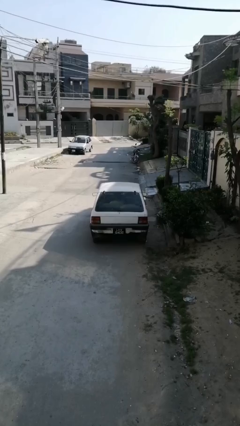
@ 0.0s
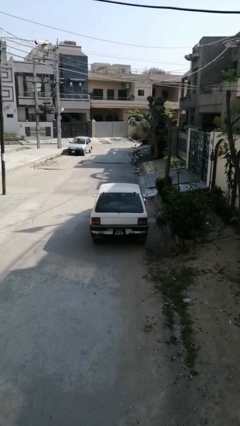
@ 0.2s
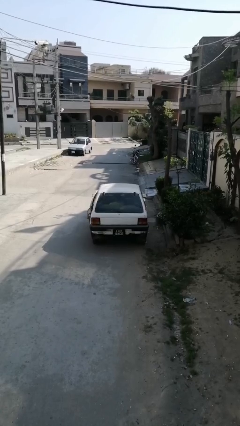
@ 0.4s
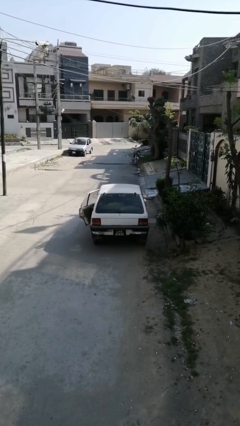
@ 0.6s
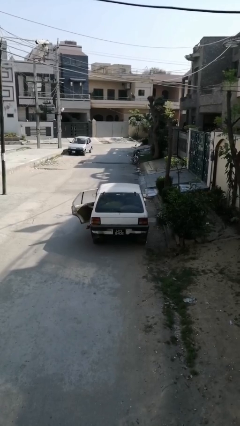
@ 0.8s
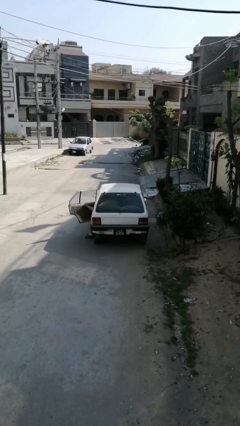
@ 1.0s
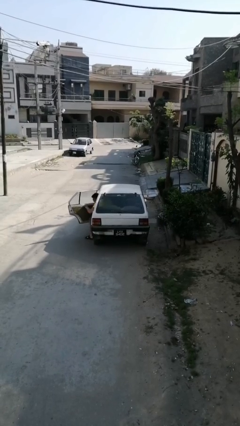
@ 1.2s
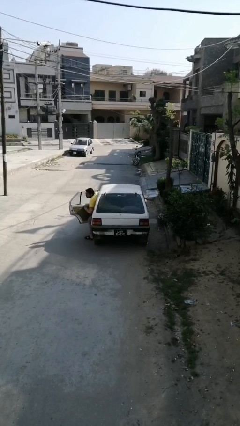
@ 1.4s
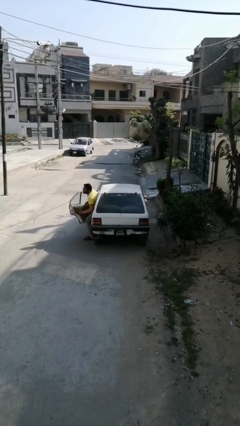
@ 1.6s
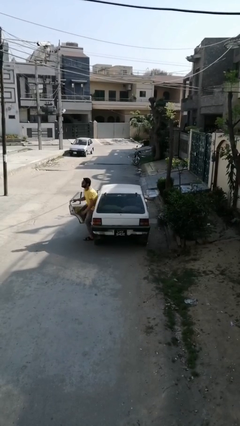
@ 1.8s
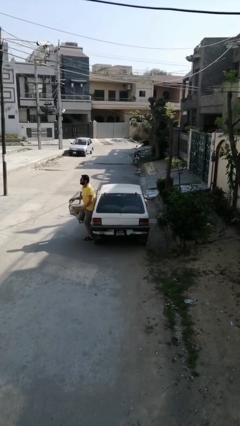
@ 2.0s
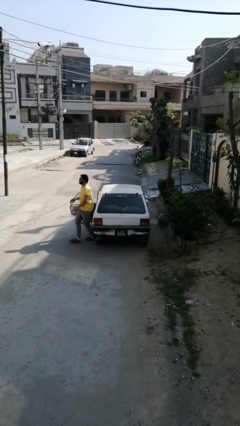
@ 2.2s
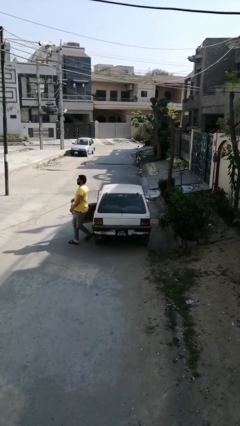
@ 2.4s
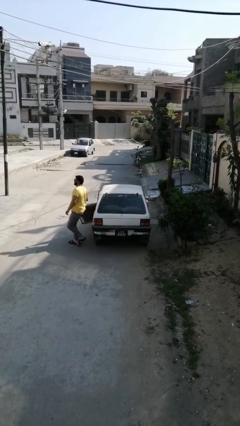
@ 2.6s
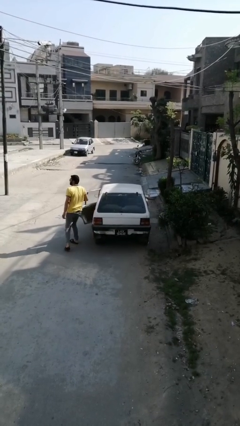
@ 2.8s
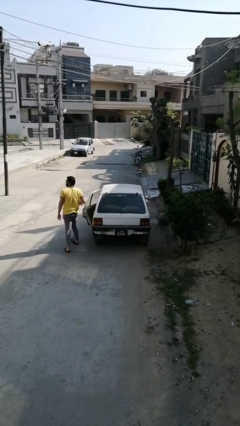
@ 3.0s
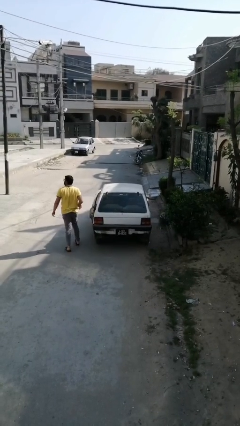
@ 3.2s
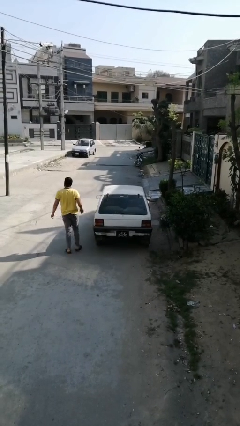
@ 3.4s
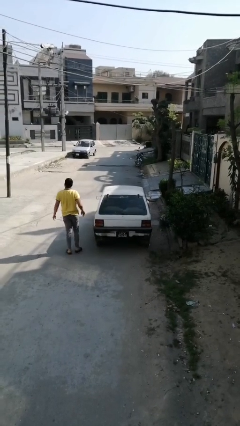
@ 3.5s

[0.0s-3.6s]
car drops off person

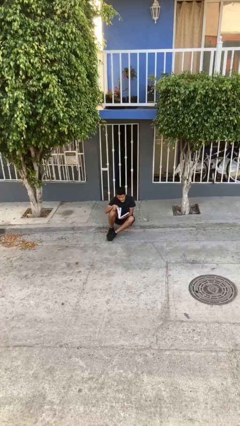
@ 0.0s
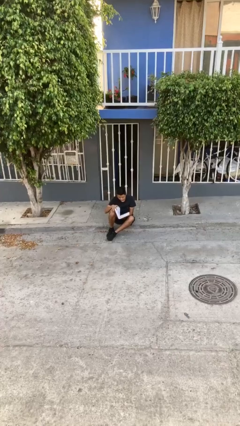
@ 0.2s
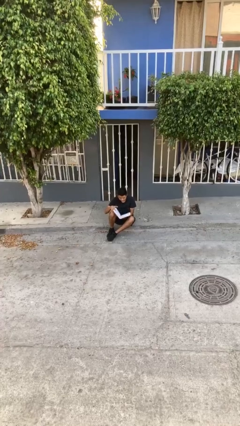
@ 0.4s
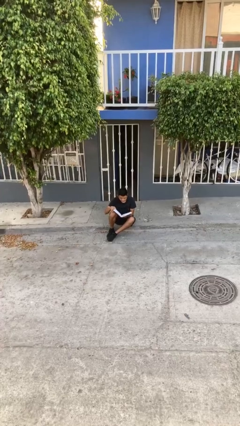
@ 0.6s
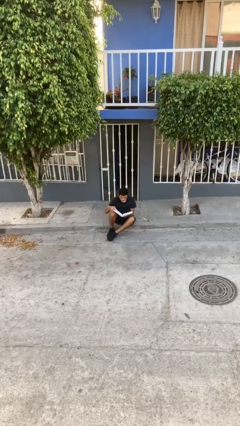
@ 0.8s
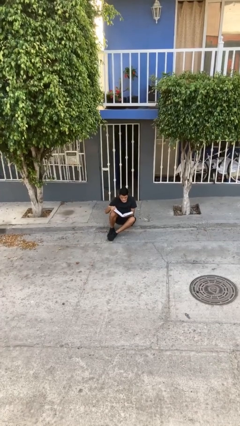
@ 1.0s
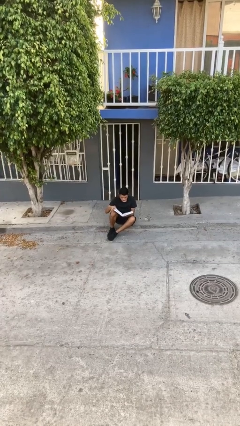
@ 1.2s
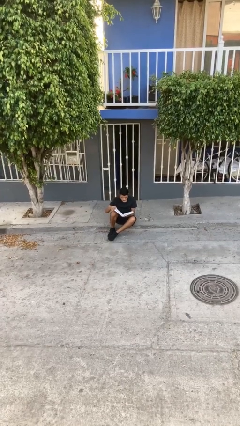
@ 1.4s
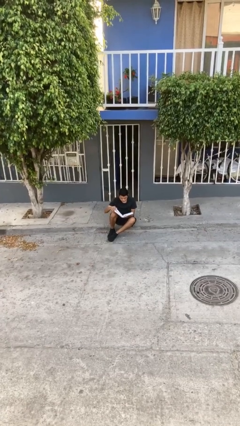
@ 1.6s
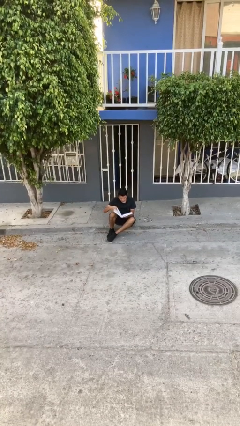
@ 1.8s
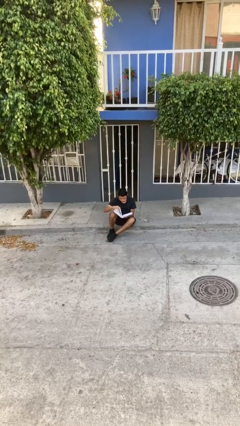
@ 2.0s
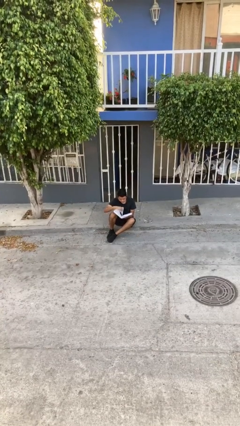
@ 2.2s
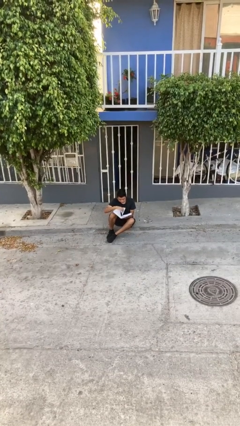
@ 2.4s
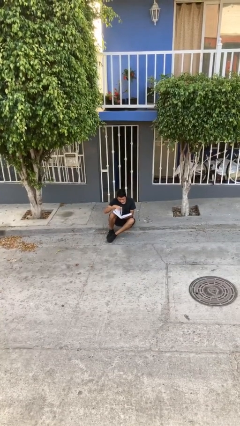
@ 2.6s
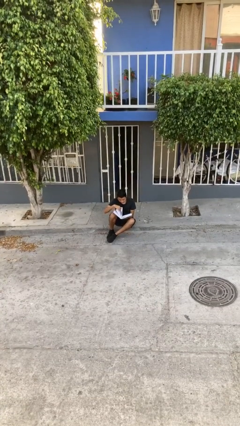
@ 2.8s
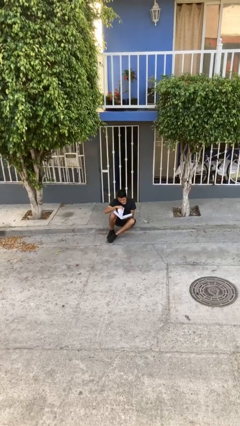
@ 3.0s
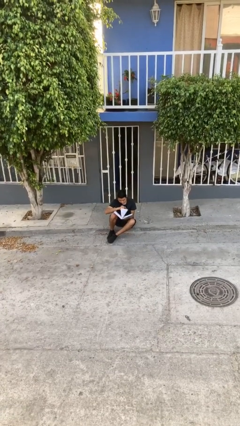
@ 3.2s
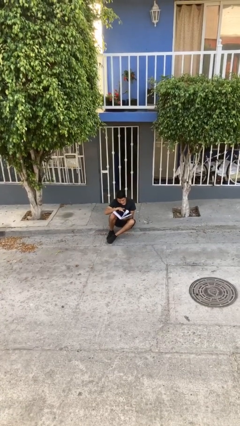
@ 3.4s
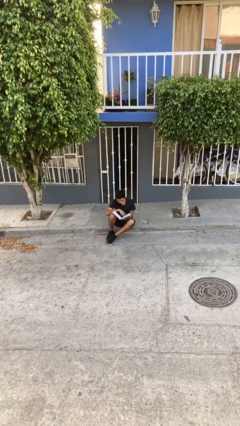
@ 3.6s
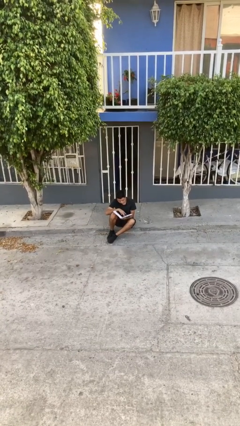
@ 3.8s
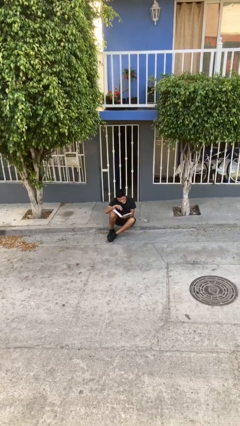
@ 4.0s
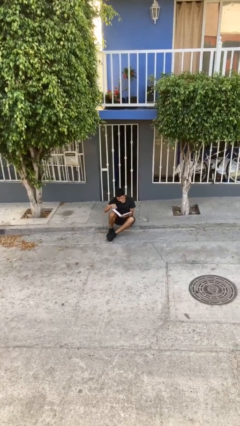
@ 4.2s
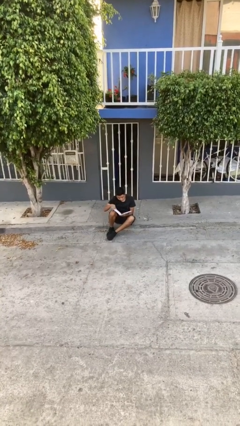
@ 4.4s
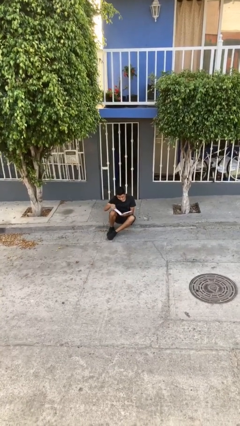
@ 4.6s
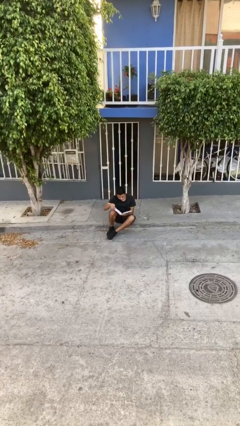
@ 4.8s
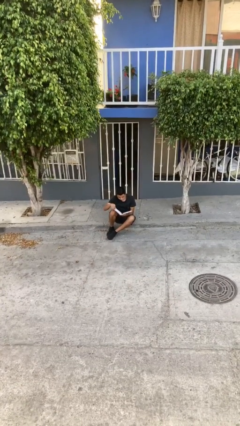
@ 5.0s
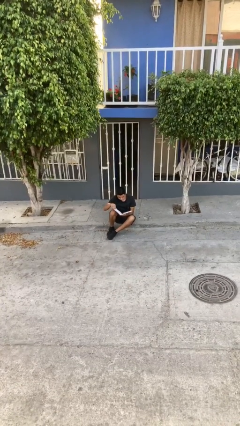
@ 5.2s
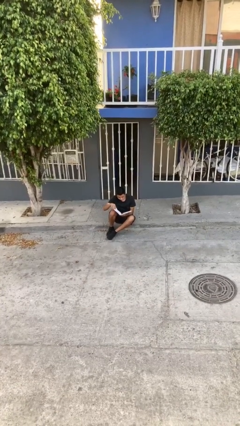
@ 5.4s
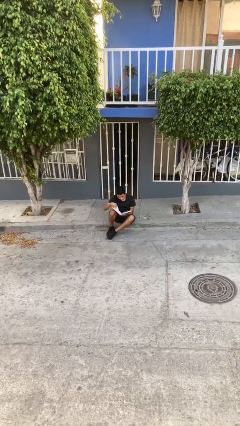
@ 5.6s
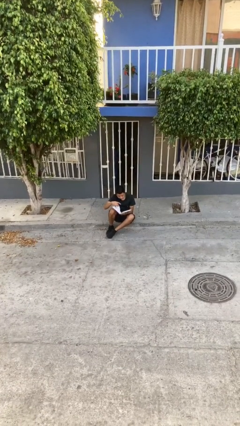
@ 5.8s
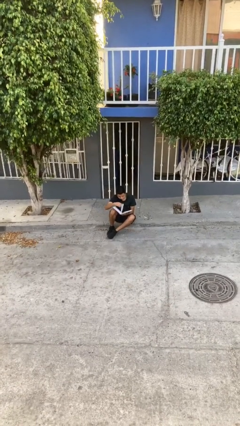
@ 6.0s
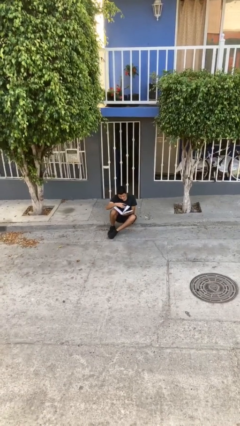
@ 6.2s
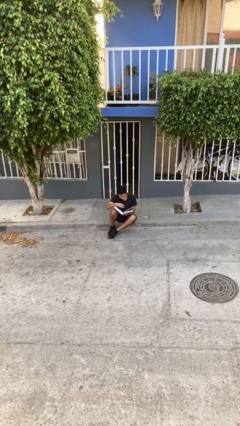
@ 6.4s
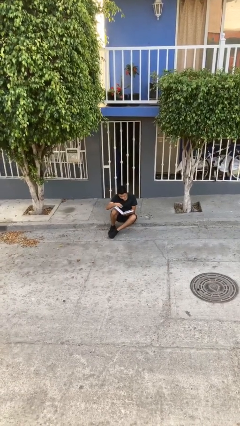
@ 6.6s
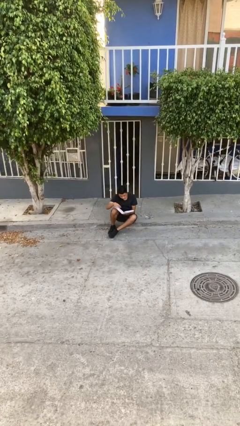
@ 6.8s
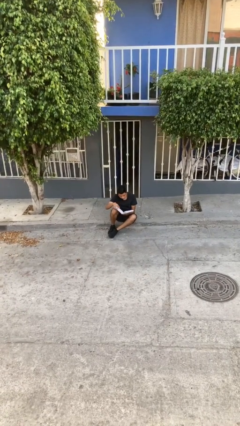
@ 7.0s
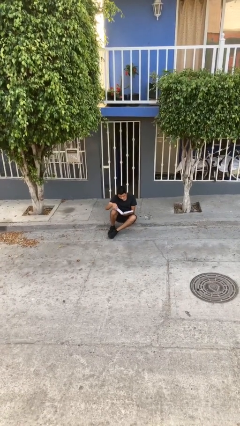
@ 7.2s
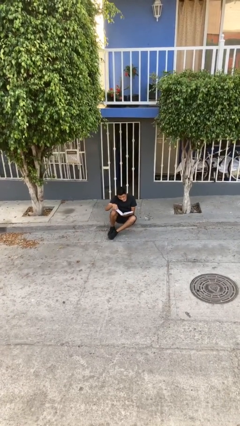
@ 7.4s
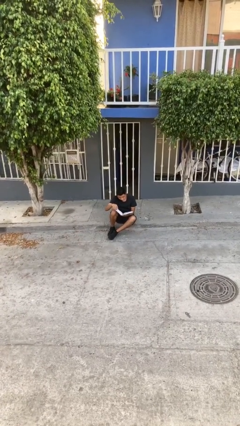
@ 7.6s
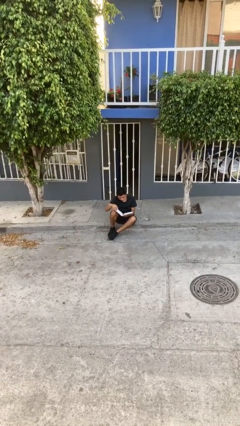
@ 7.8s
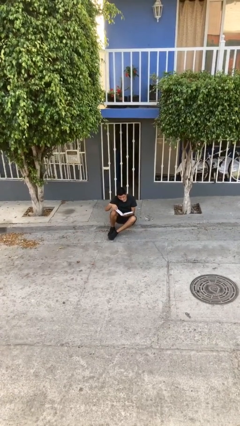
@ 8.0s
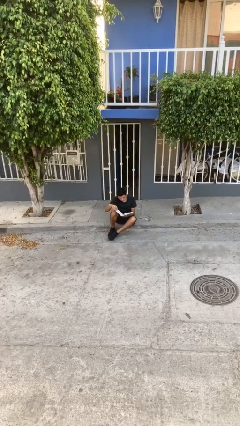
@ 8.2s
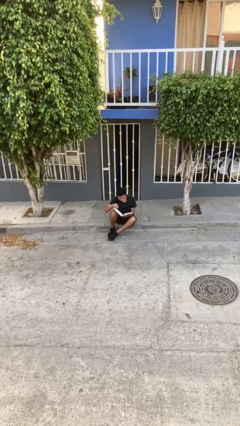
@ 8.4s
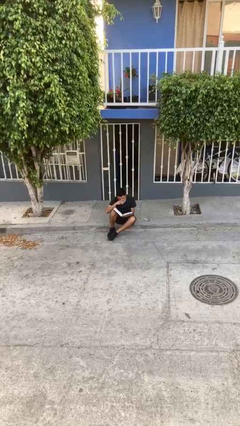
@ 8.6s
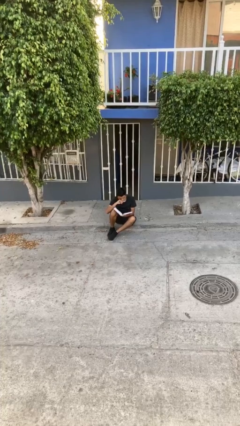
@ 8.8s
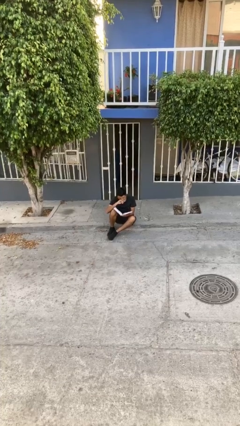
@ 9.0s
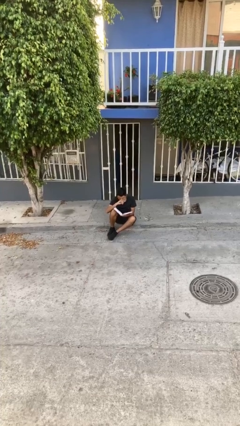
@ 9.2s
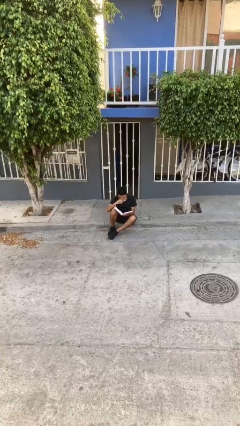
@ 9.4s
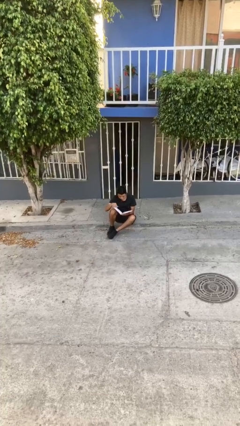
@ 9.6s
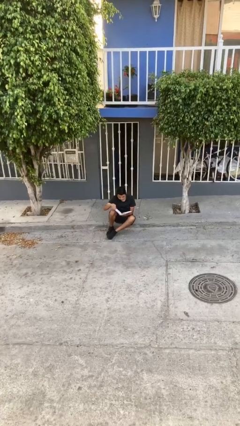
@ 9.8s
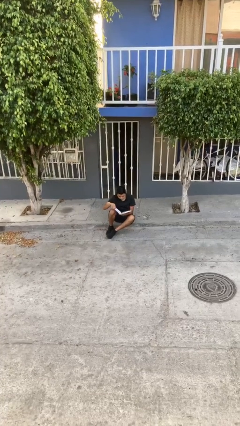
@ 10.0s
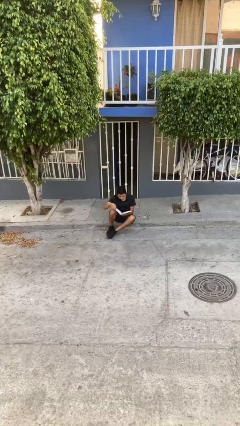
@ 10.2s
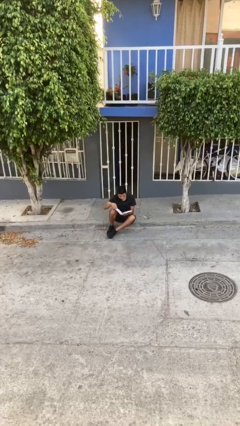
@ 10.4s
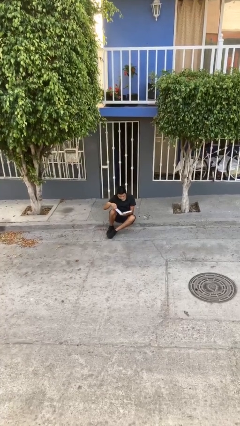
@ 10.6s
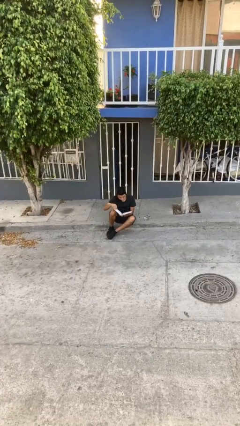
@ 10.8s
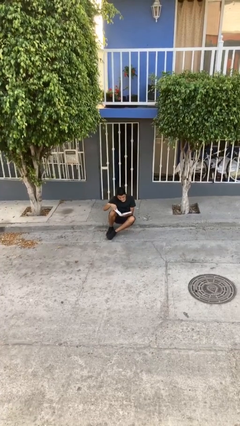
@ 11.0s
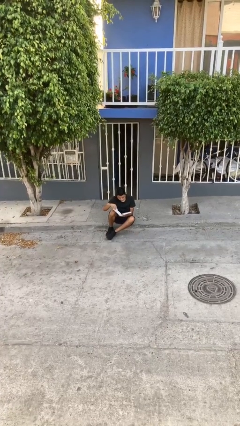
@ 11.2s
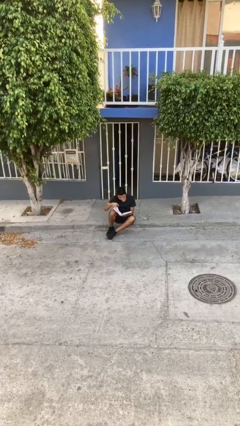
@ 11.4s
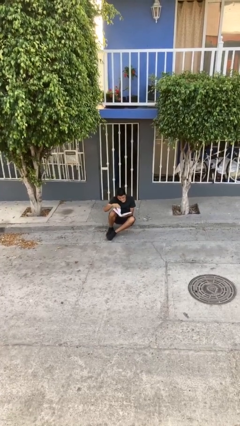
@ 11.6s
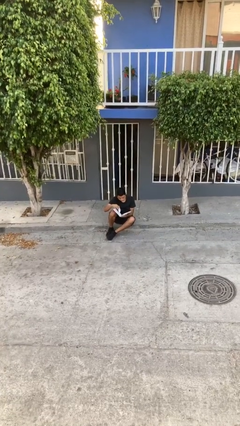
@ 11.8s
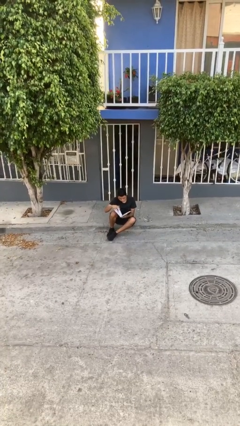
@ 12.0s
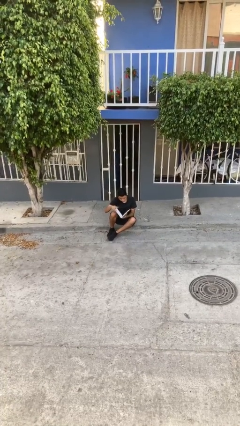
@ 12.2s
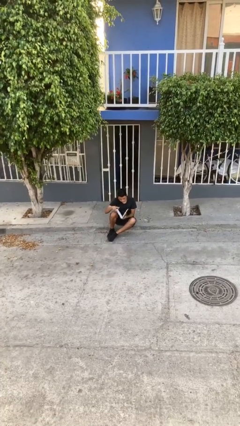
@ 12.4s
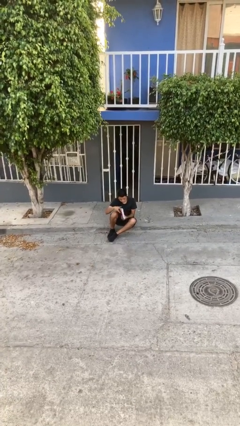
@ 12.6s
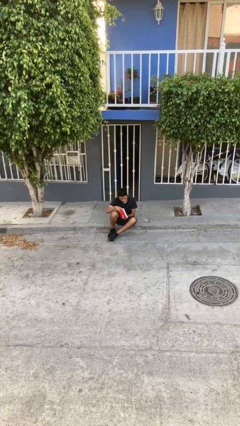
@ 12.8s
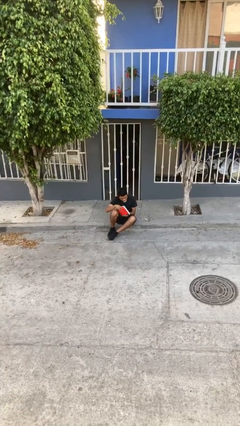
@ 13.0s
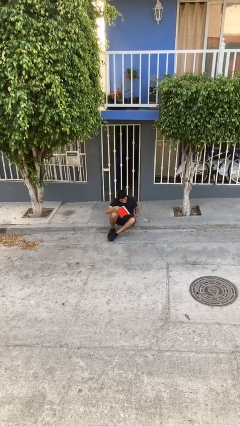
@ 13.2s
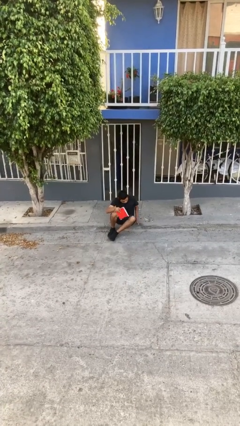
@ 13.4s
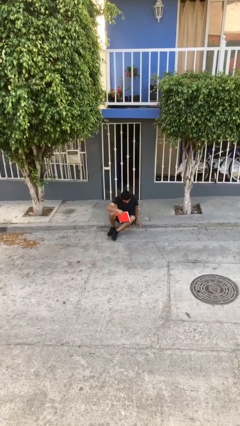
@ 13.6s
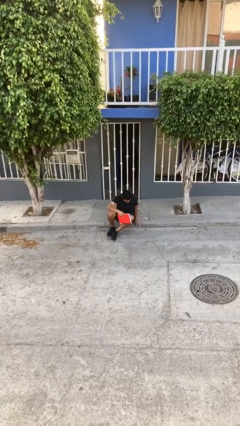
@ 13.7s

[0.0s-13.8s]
person reads document

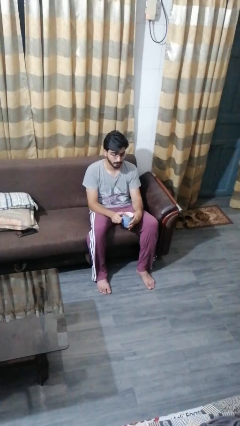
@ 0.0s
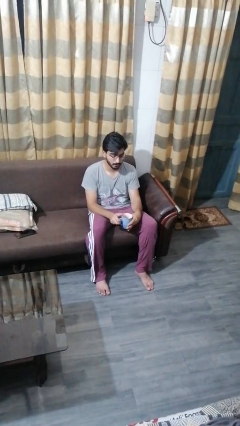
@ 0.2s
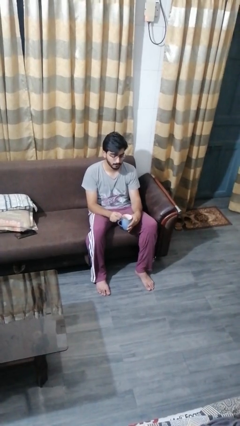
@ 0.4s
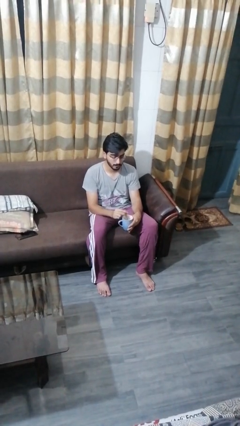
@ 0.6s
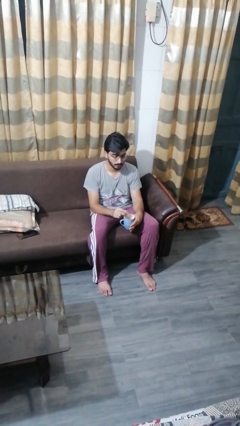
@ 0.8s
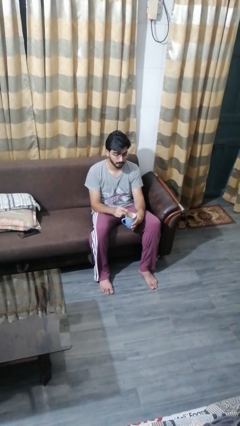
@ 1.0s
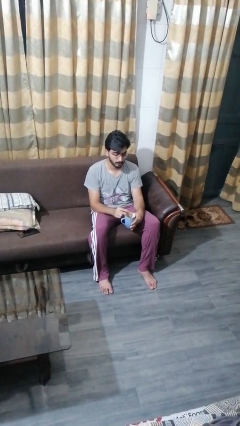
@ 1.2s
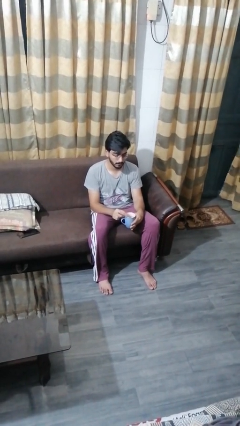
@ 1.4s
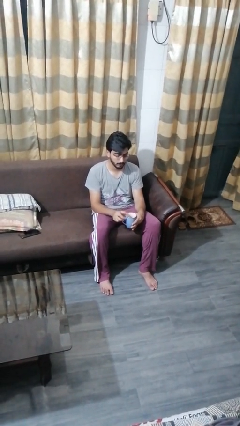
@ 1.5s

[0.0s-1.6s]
person stirs mug
